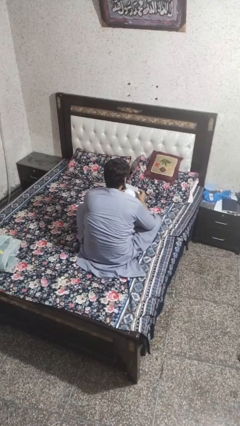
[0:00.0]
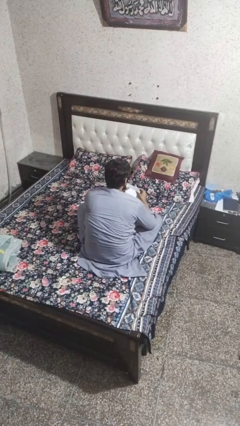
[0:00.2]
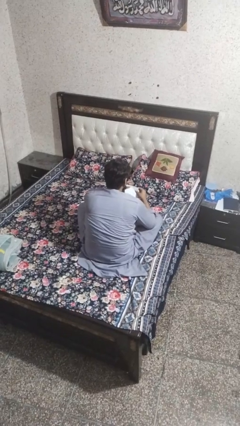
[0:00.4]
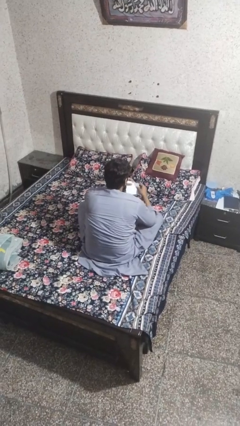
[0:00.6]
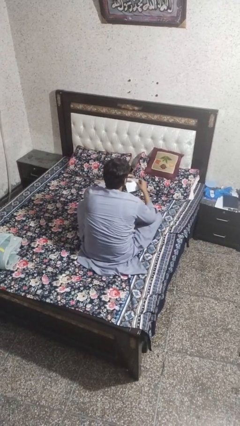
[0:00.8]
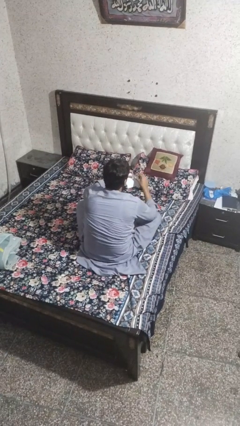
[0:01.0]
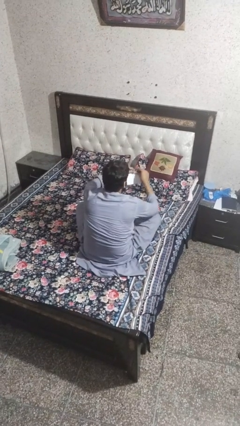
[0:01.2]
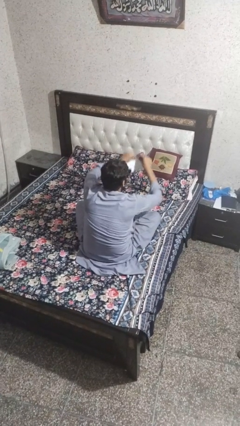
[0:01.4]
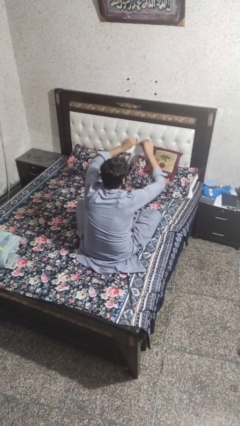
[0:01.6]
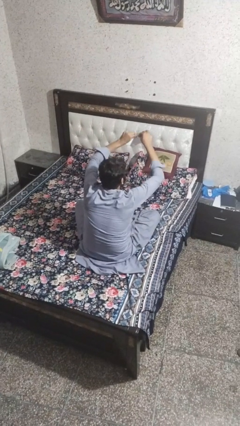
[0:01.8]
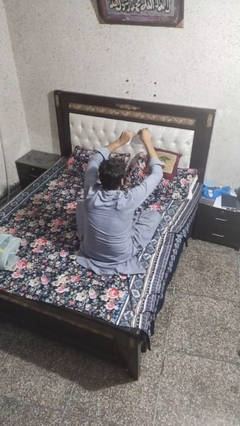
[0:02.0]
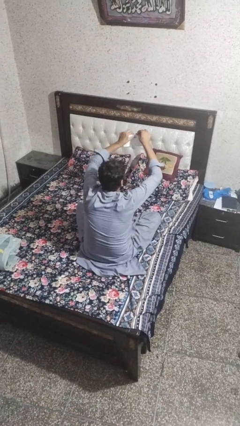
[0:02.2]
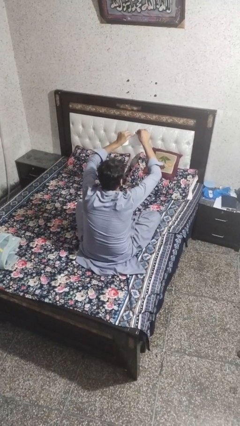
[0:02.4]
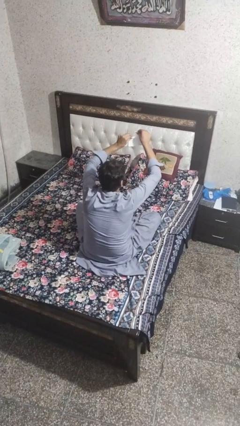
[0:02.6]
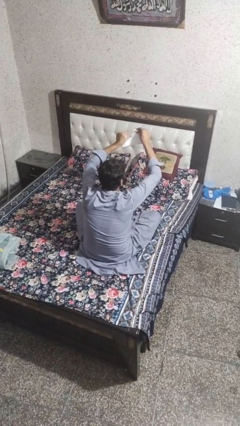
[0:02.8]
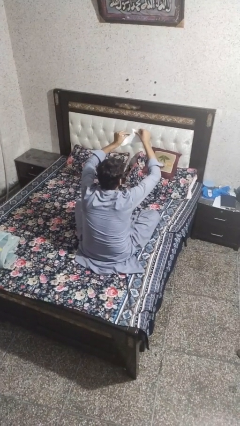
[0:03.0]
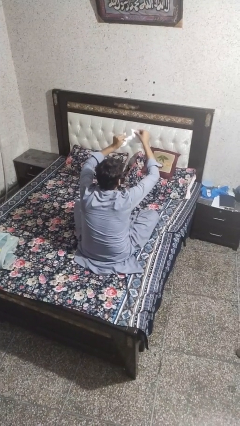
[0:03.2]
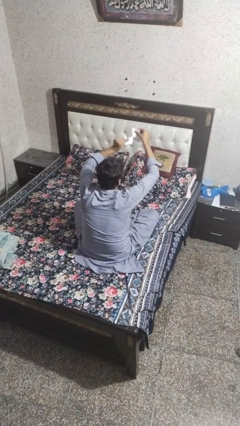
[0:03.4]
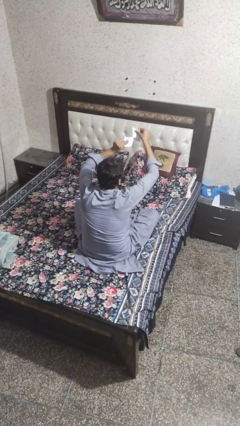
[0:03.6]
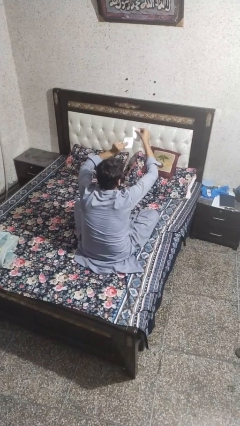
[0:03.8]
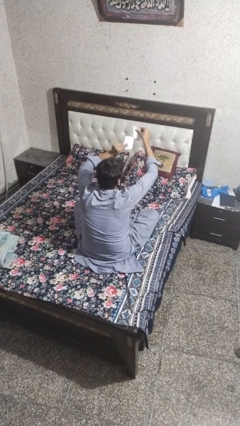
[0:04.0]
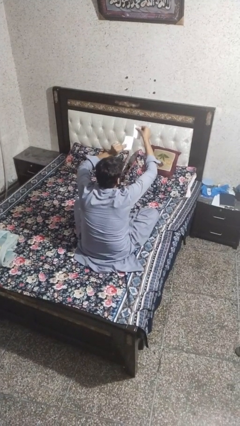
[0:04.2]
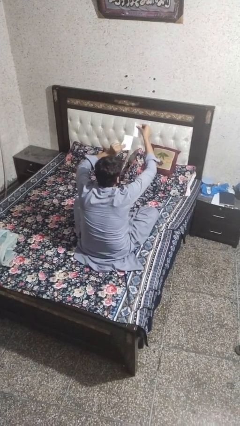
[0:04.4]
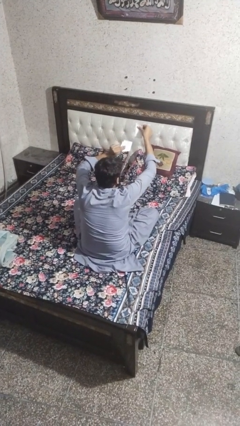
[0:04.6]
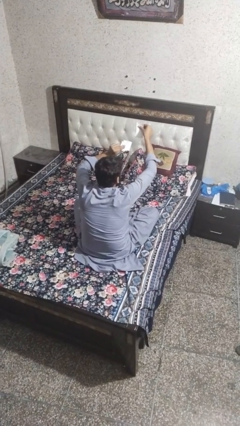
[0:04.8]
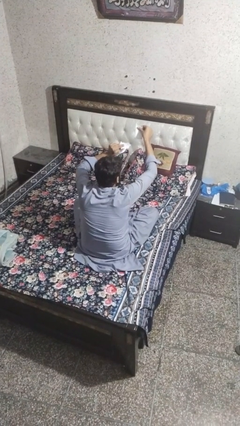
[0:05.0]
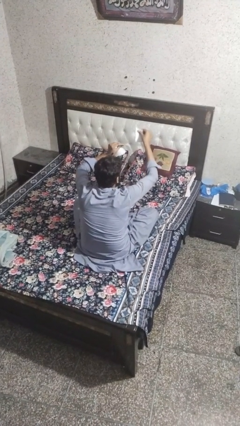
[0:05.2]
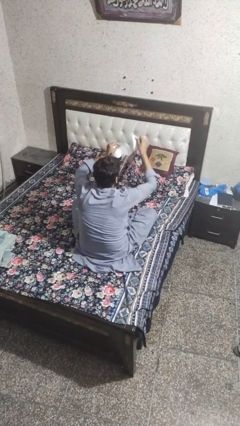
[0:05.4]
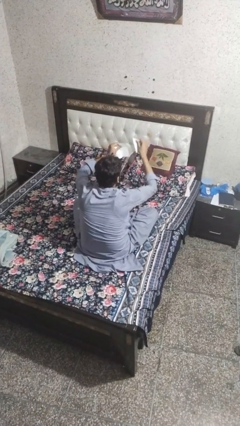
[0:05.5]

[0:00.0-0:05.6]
person tears paper

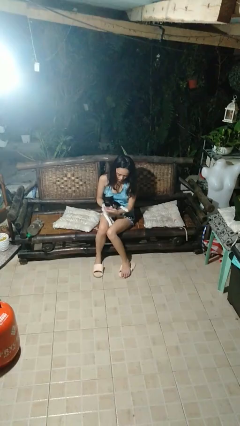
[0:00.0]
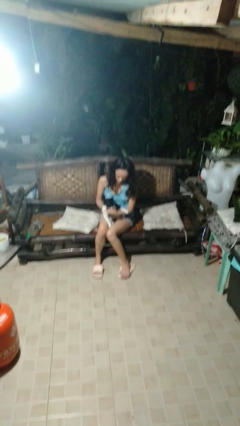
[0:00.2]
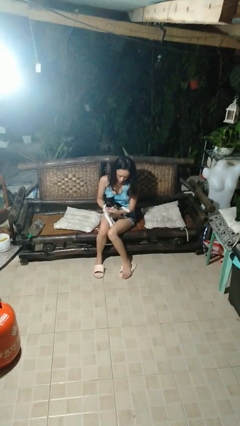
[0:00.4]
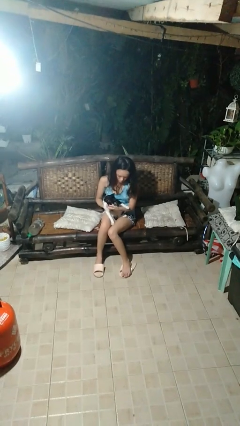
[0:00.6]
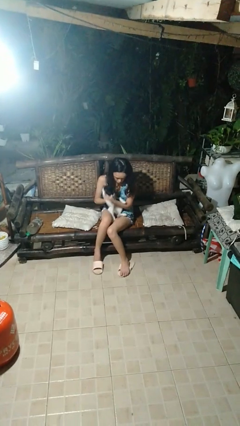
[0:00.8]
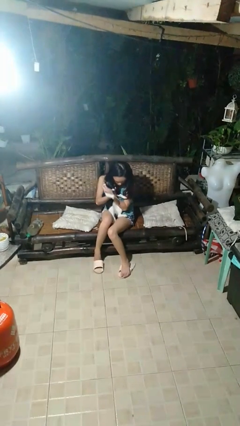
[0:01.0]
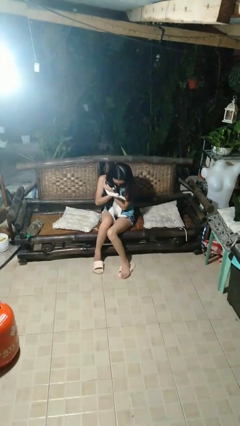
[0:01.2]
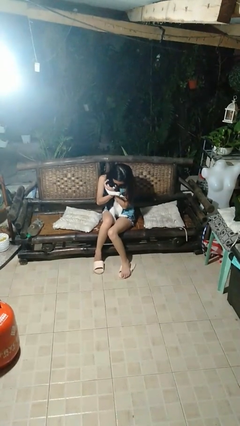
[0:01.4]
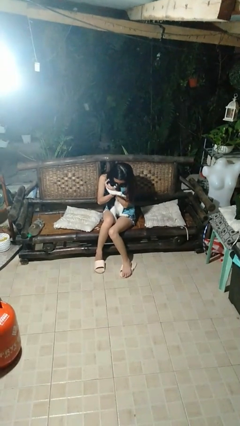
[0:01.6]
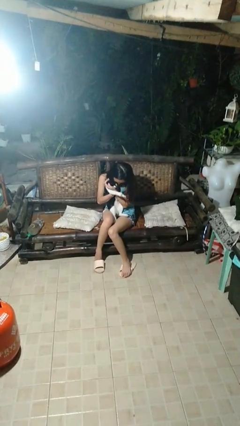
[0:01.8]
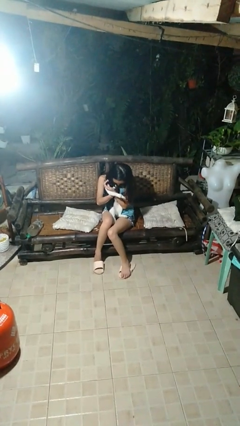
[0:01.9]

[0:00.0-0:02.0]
person hugs cat

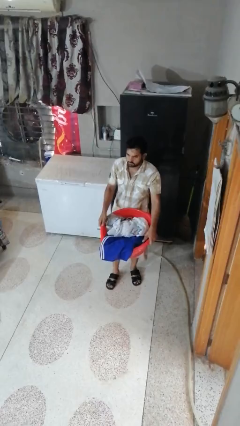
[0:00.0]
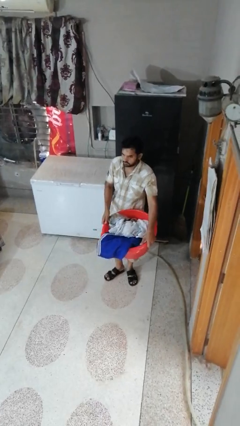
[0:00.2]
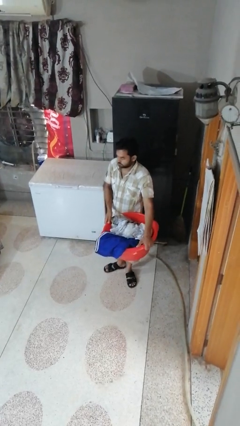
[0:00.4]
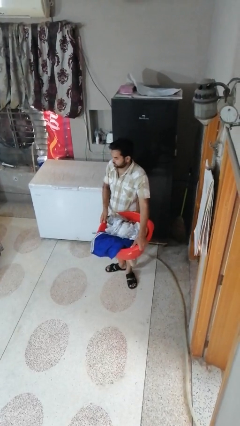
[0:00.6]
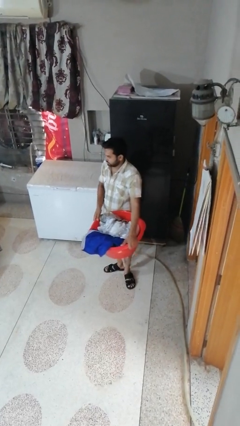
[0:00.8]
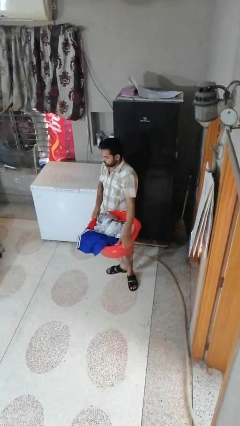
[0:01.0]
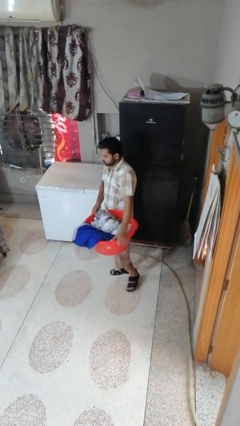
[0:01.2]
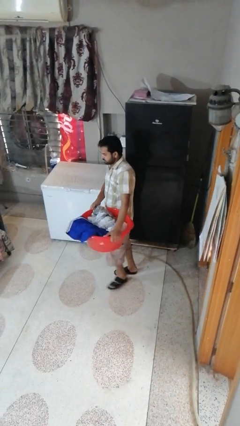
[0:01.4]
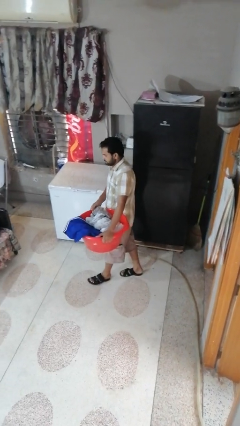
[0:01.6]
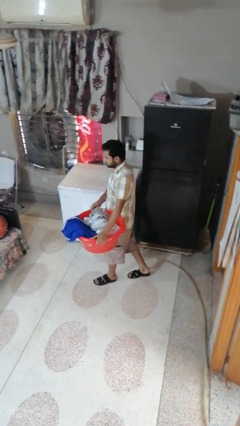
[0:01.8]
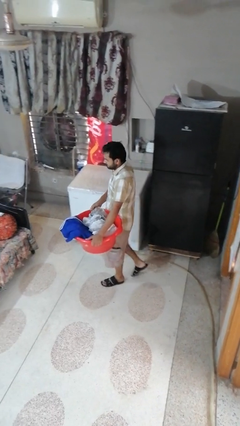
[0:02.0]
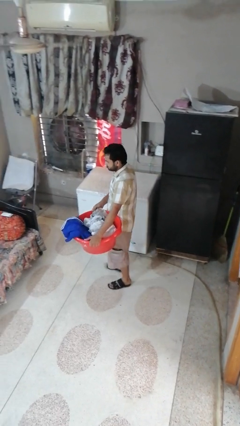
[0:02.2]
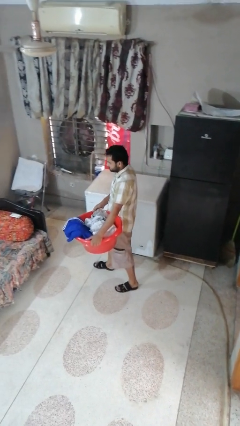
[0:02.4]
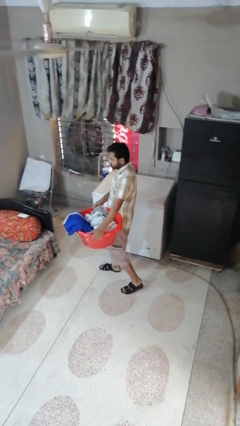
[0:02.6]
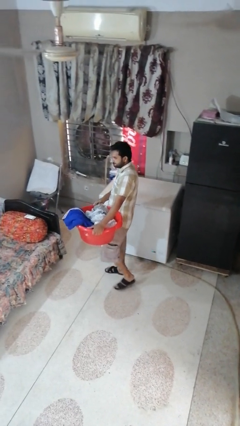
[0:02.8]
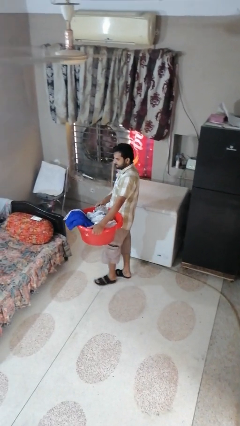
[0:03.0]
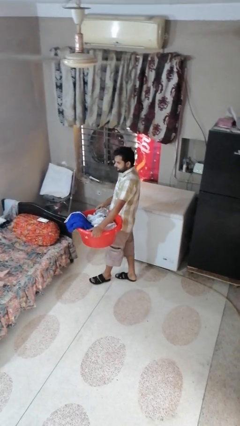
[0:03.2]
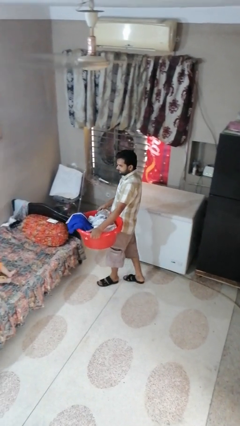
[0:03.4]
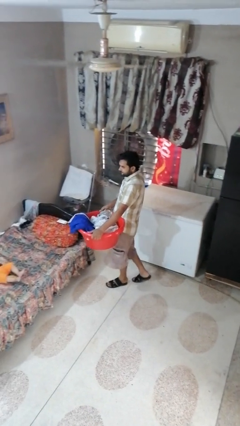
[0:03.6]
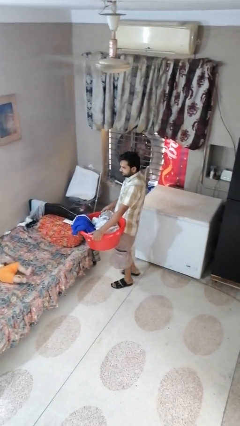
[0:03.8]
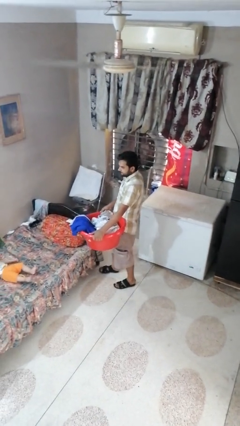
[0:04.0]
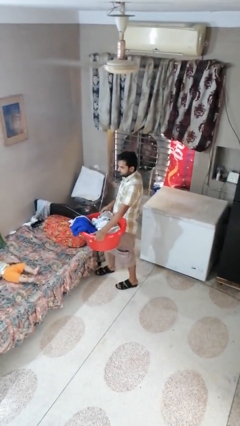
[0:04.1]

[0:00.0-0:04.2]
person carries laundry basket

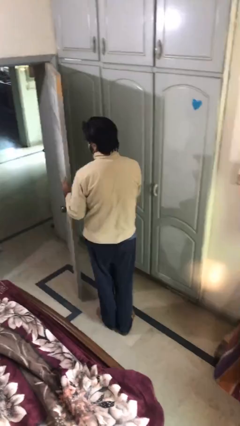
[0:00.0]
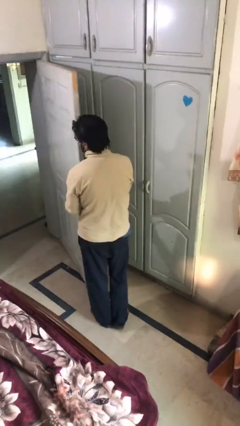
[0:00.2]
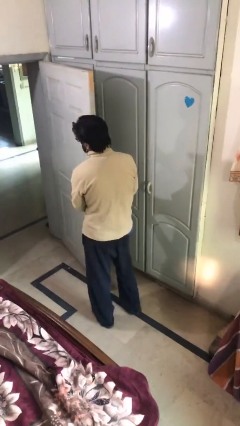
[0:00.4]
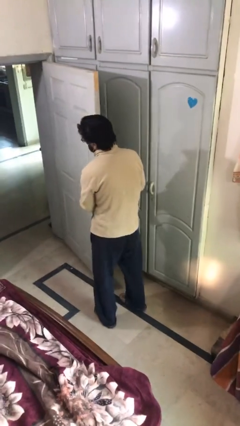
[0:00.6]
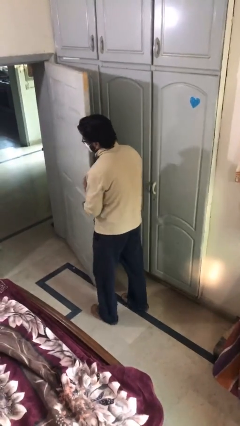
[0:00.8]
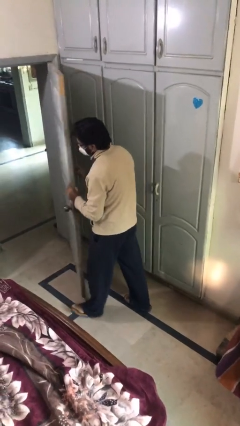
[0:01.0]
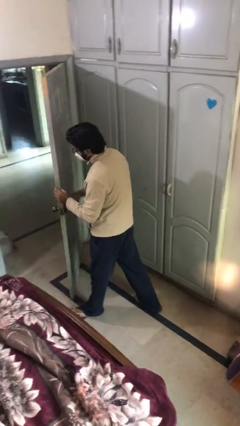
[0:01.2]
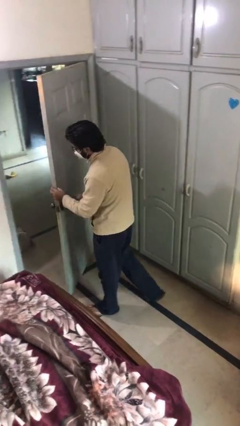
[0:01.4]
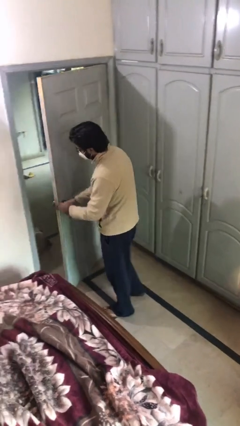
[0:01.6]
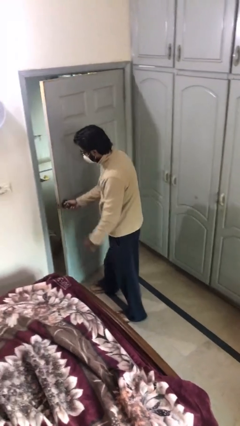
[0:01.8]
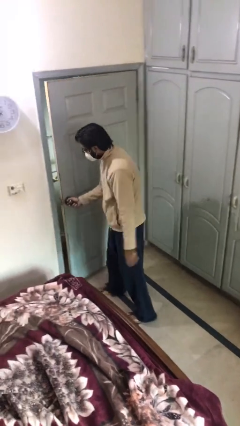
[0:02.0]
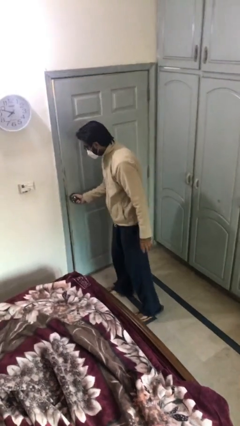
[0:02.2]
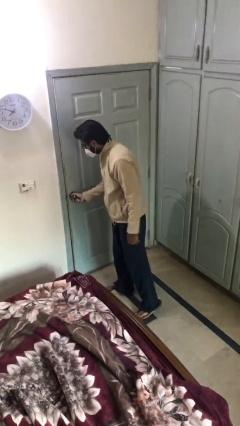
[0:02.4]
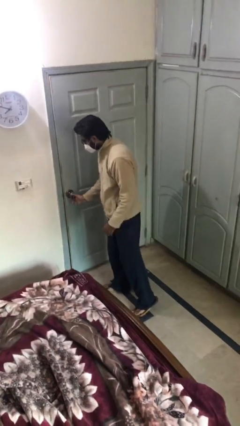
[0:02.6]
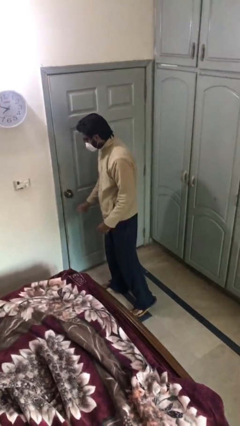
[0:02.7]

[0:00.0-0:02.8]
person closes facility door

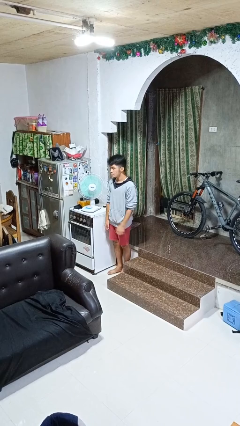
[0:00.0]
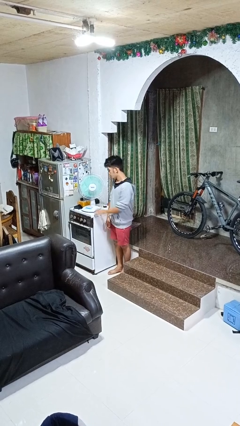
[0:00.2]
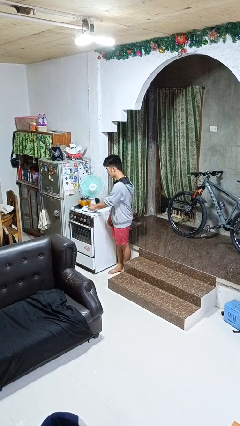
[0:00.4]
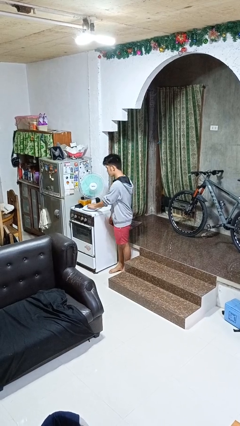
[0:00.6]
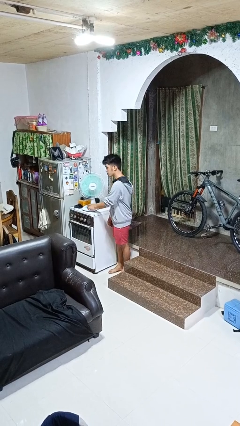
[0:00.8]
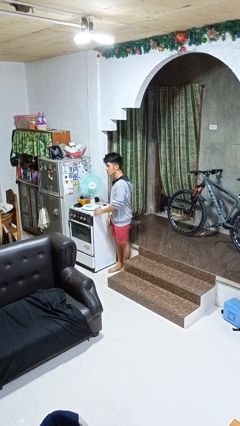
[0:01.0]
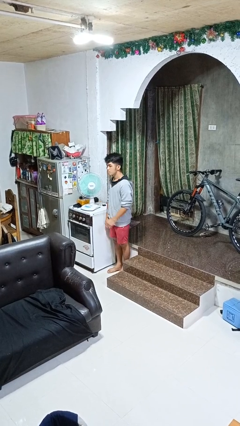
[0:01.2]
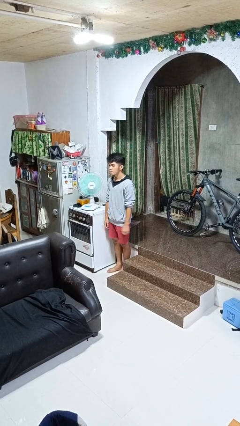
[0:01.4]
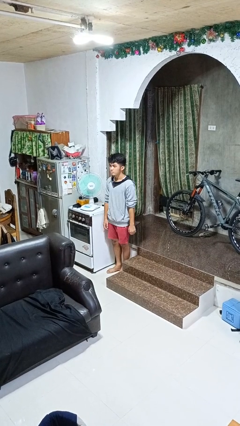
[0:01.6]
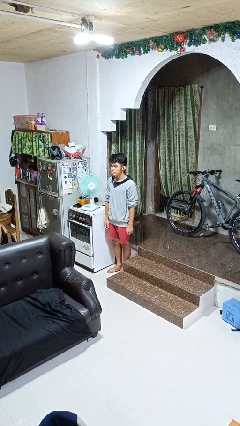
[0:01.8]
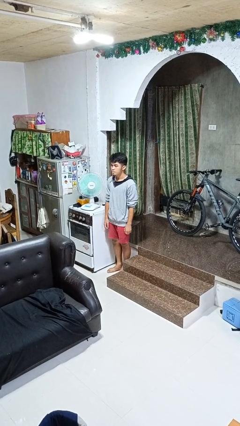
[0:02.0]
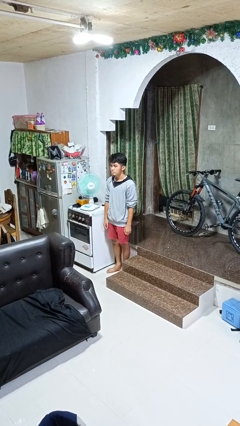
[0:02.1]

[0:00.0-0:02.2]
person turns off fan

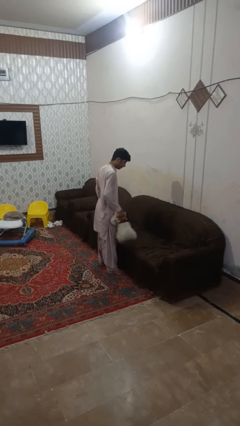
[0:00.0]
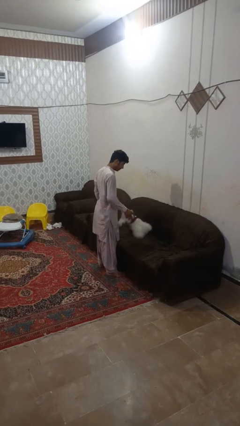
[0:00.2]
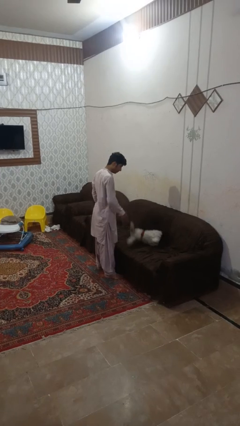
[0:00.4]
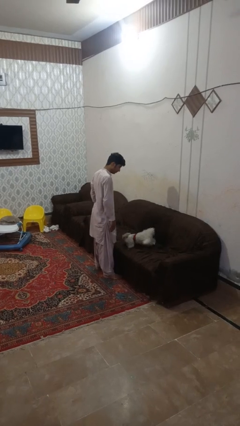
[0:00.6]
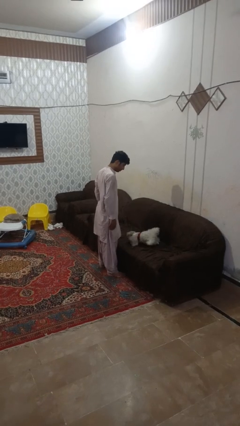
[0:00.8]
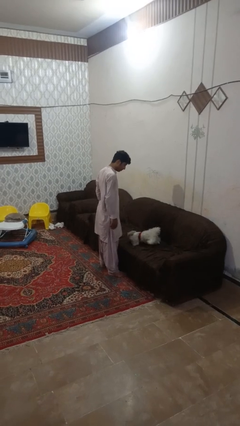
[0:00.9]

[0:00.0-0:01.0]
person puts down object on couch
